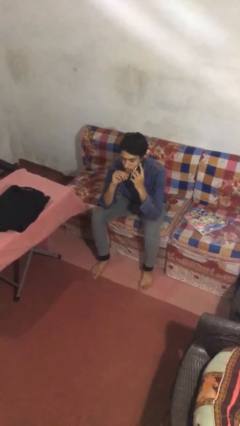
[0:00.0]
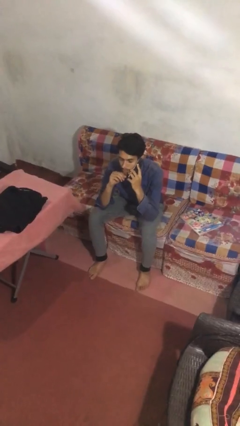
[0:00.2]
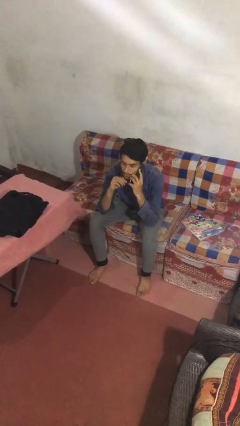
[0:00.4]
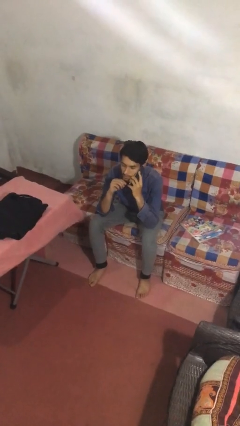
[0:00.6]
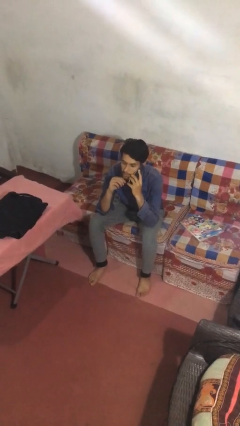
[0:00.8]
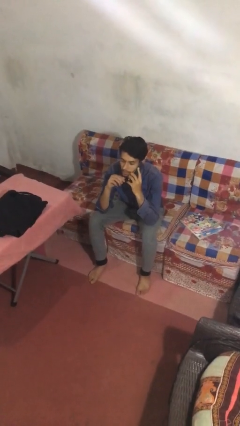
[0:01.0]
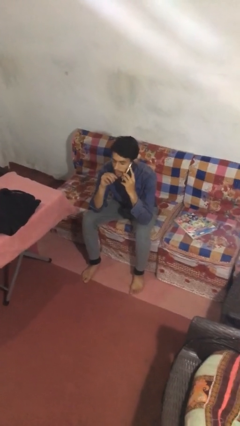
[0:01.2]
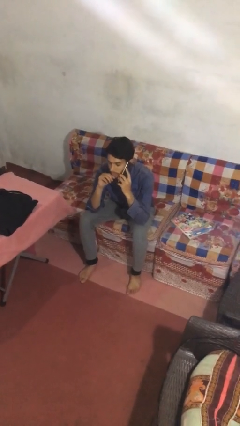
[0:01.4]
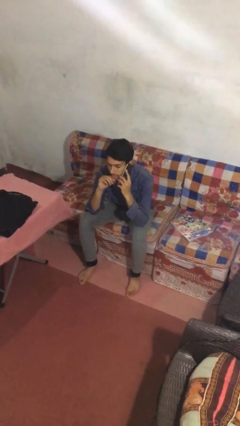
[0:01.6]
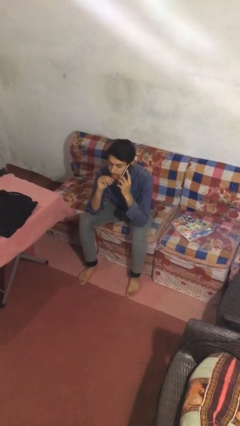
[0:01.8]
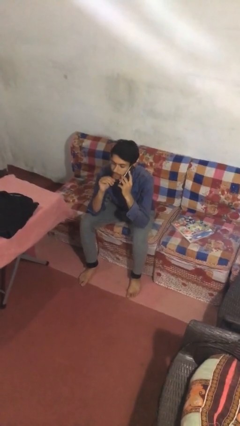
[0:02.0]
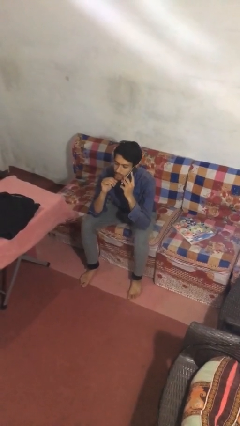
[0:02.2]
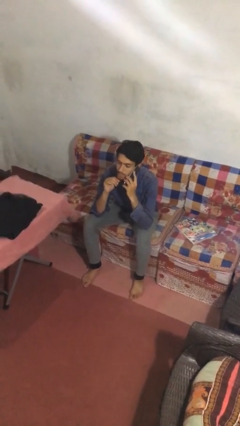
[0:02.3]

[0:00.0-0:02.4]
person talks on phone

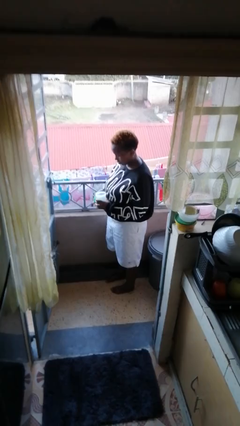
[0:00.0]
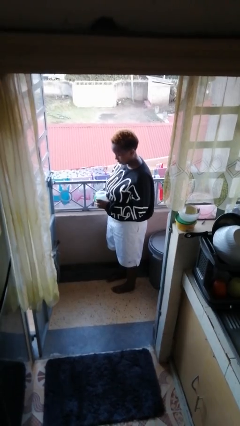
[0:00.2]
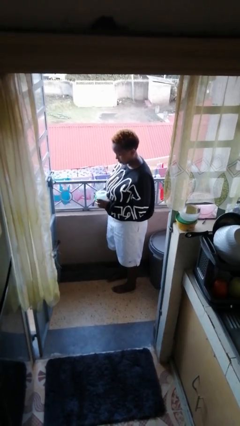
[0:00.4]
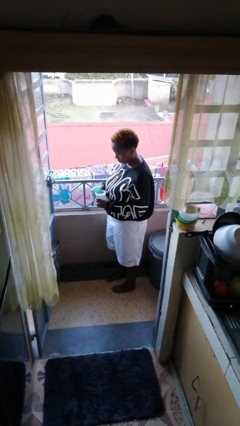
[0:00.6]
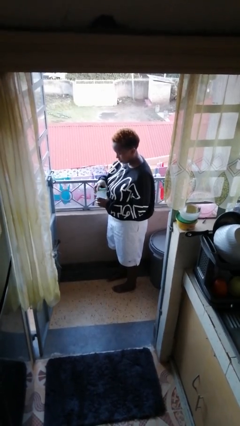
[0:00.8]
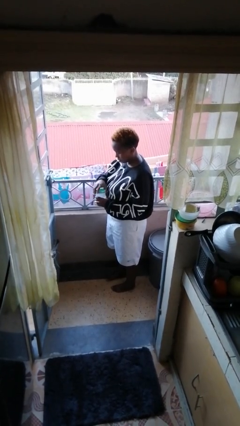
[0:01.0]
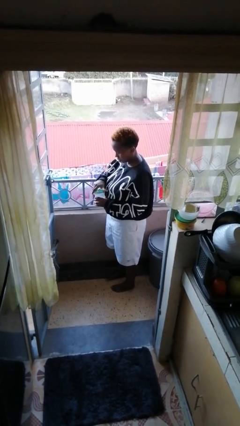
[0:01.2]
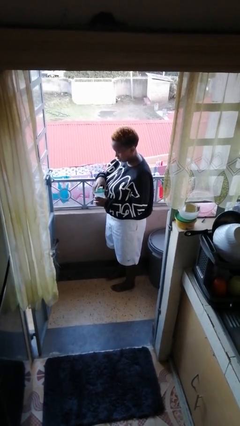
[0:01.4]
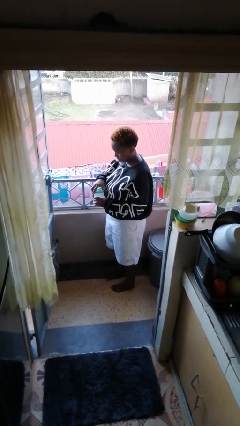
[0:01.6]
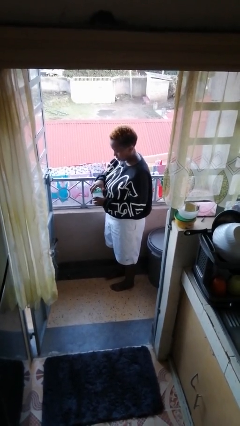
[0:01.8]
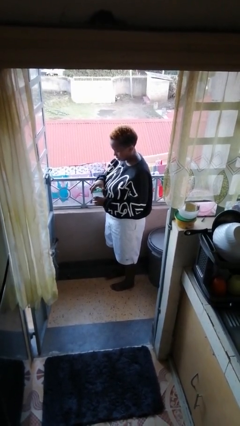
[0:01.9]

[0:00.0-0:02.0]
person closes jar

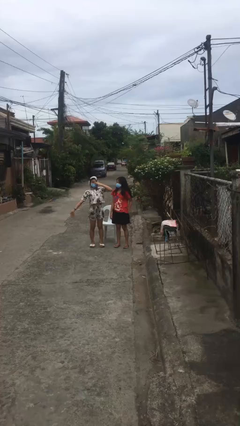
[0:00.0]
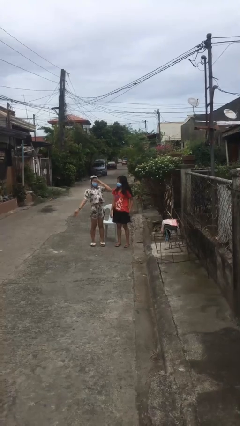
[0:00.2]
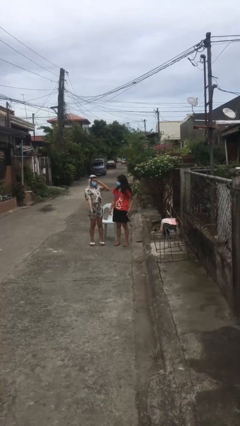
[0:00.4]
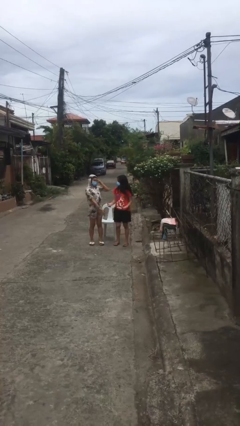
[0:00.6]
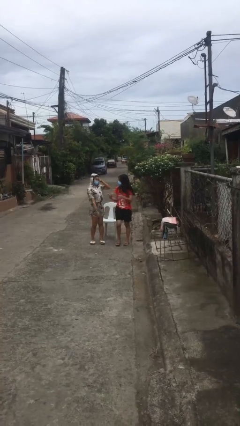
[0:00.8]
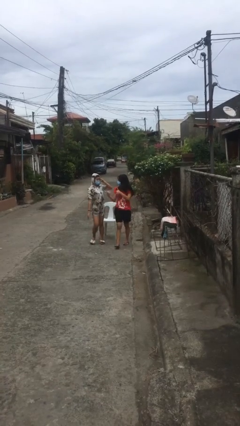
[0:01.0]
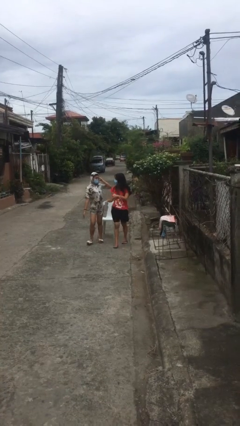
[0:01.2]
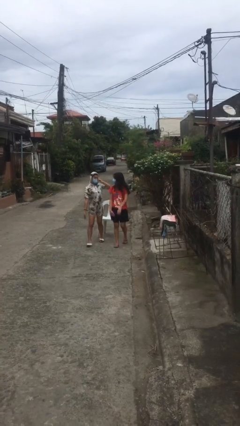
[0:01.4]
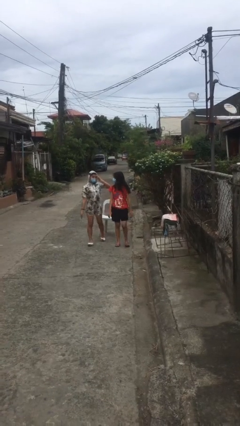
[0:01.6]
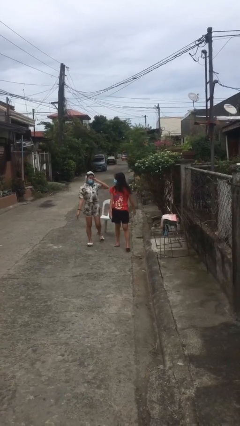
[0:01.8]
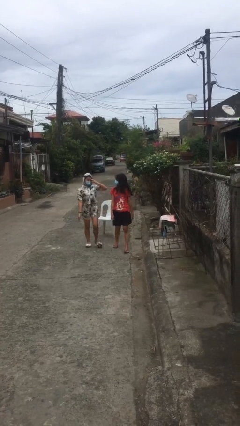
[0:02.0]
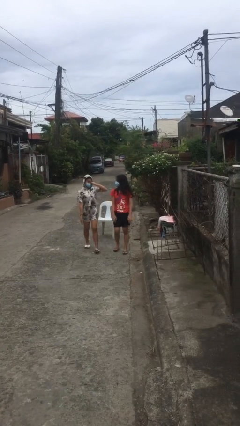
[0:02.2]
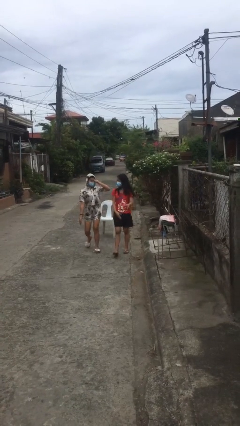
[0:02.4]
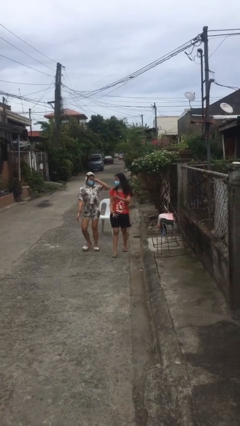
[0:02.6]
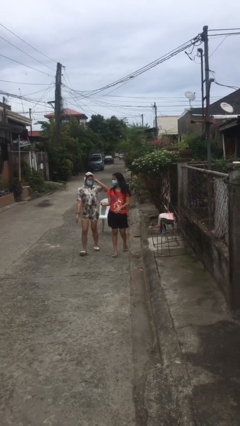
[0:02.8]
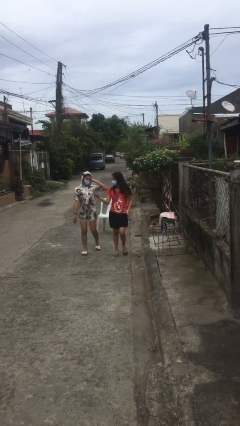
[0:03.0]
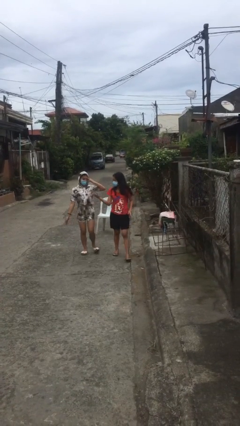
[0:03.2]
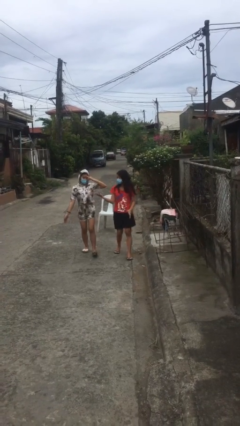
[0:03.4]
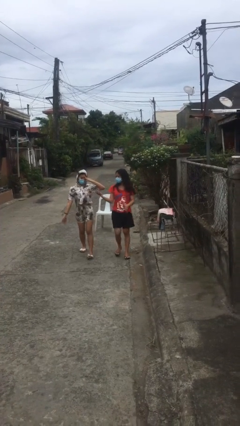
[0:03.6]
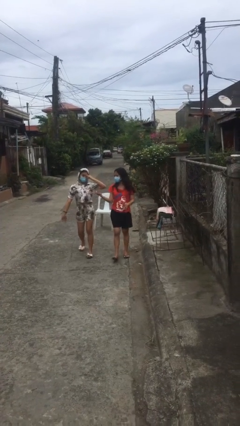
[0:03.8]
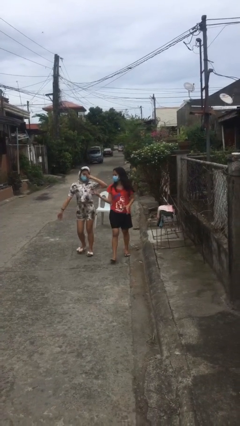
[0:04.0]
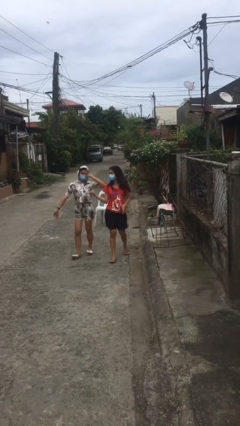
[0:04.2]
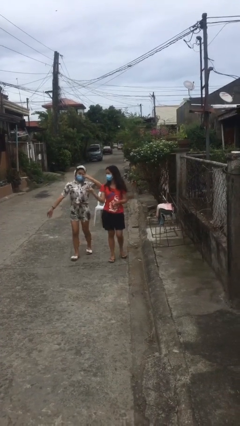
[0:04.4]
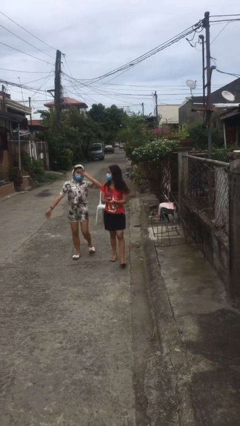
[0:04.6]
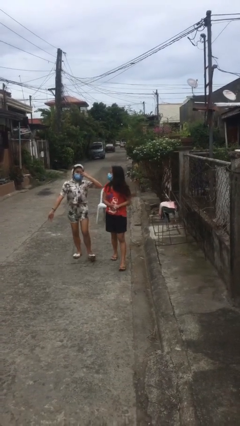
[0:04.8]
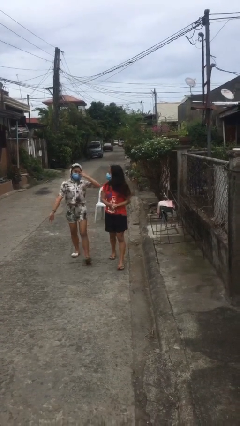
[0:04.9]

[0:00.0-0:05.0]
person talks to person

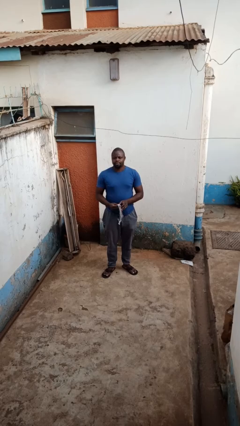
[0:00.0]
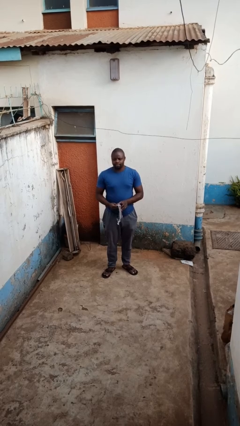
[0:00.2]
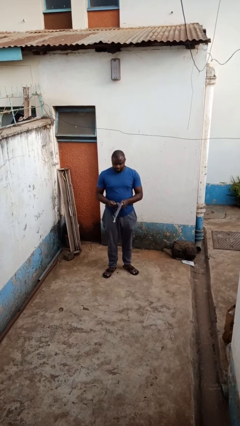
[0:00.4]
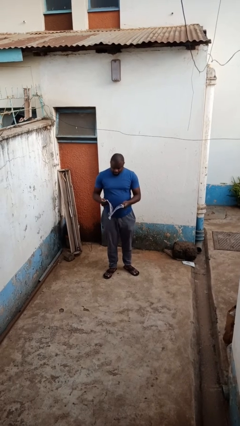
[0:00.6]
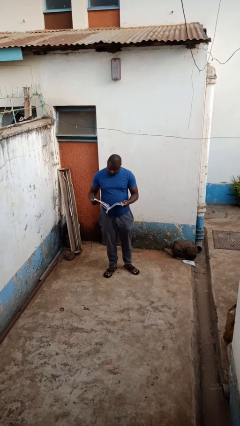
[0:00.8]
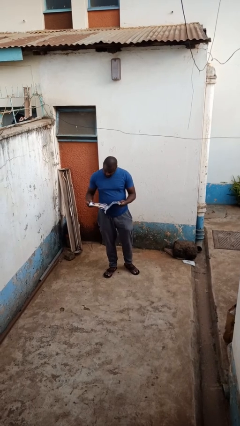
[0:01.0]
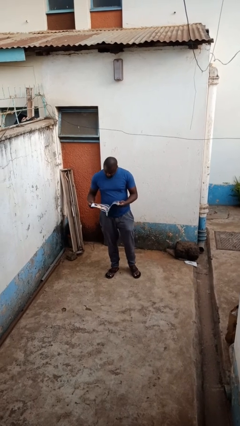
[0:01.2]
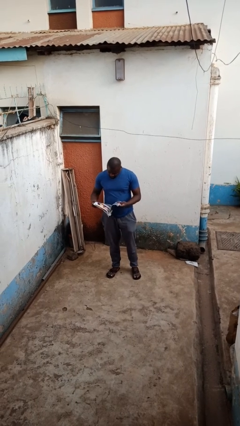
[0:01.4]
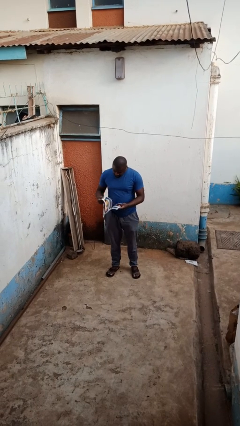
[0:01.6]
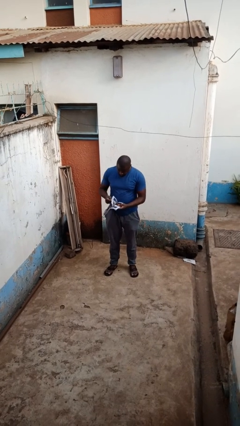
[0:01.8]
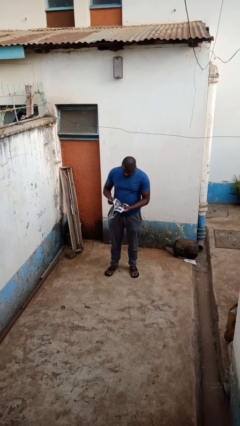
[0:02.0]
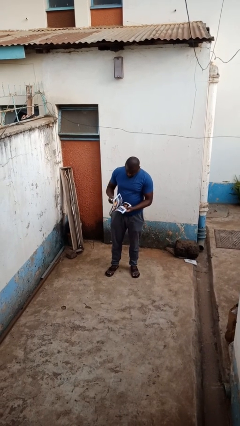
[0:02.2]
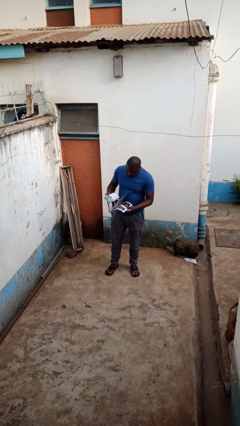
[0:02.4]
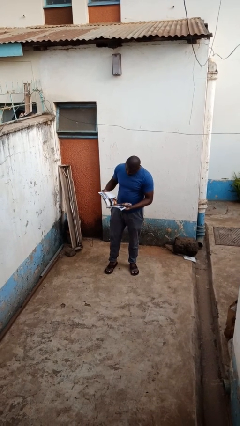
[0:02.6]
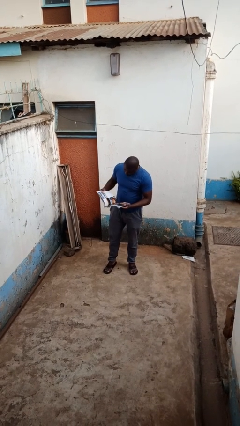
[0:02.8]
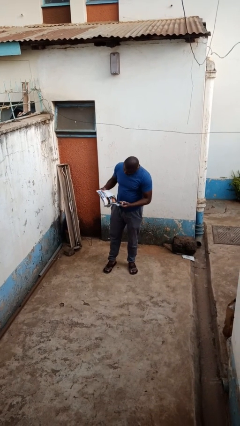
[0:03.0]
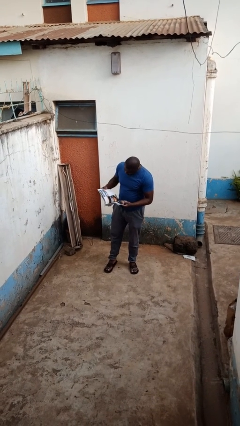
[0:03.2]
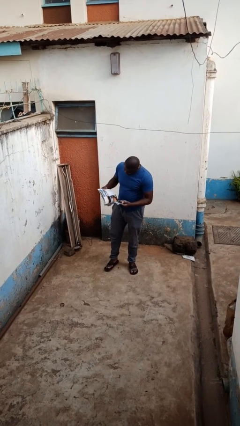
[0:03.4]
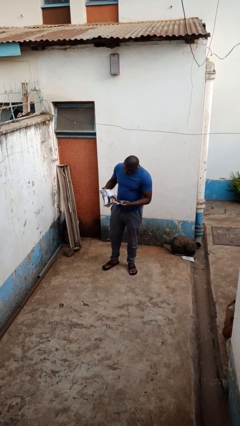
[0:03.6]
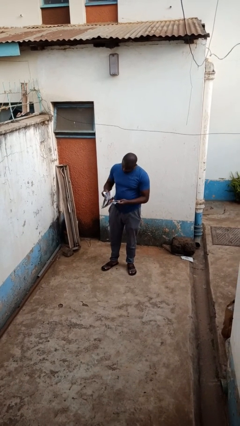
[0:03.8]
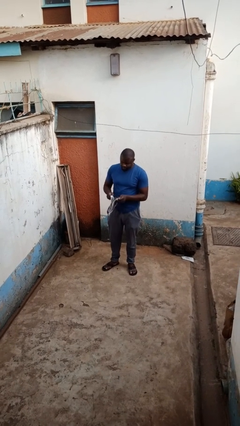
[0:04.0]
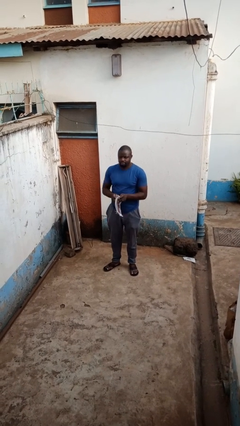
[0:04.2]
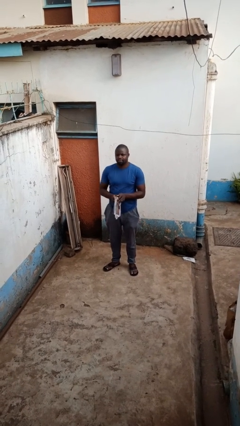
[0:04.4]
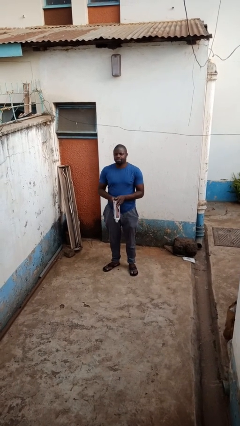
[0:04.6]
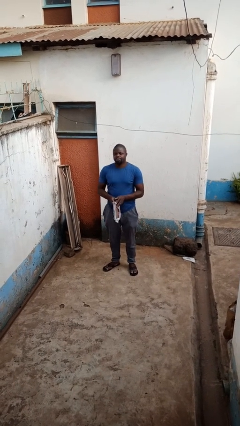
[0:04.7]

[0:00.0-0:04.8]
person reads magazine

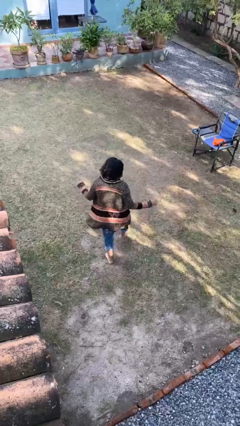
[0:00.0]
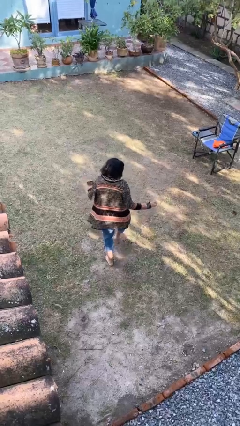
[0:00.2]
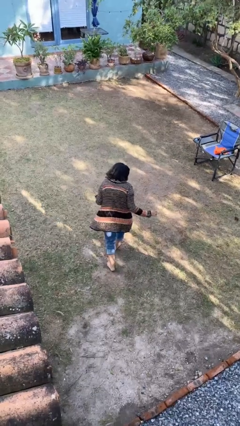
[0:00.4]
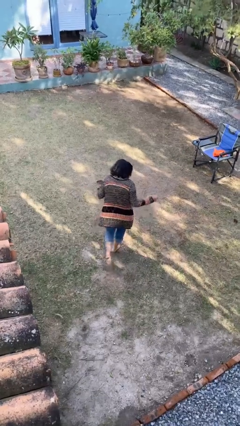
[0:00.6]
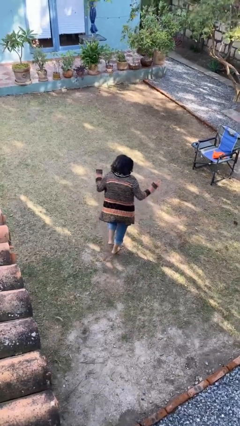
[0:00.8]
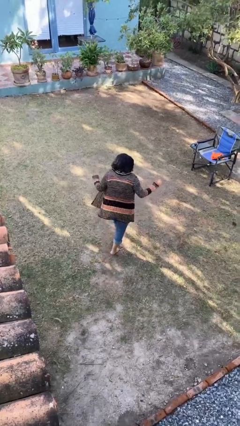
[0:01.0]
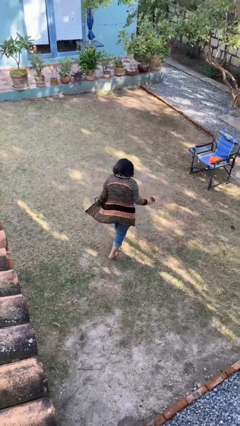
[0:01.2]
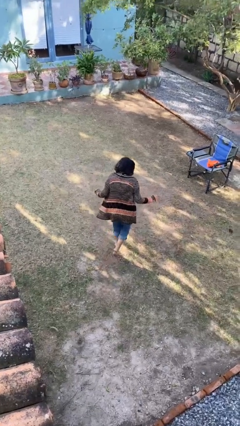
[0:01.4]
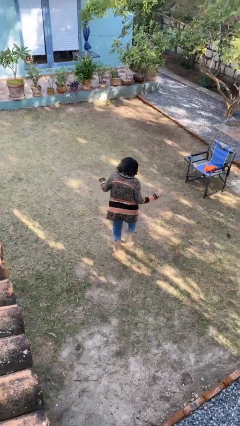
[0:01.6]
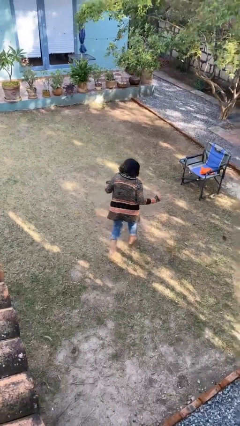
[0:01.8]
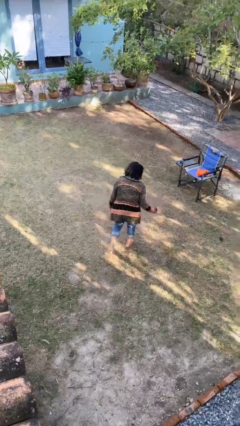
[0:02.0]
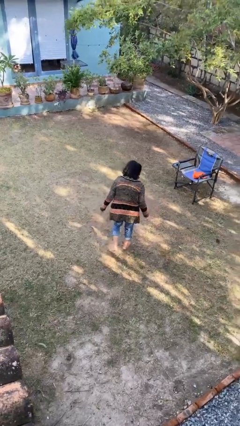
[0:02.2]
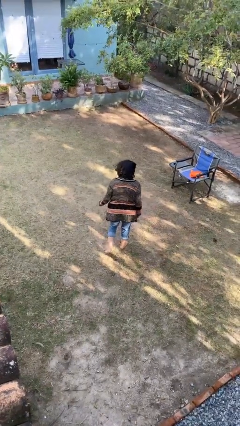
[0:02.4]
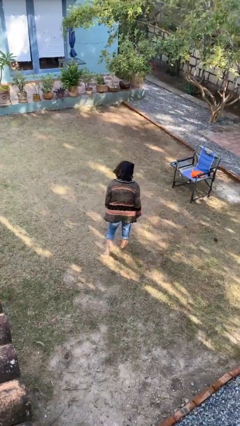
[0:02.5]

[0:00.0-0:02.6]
person walks tiptoe

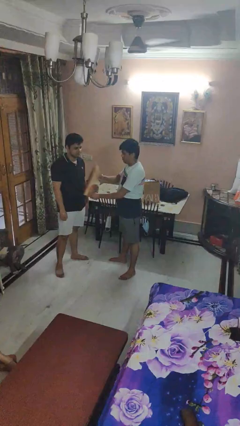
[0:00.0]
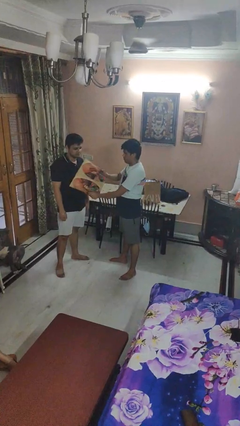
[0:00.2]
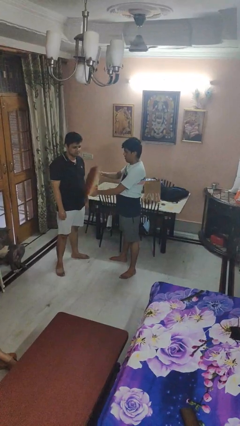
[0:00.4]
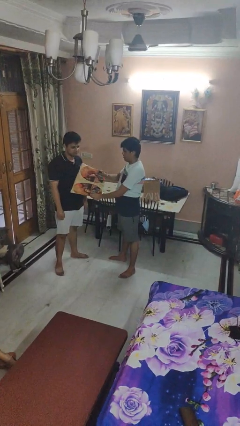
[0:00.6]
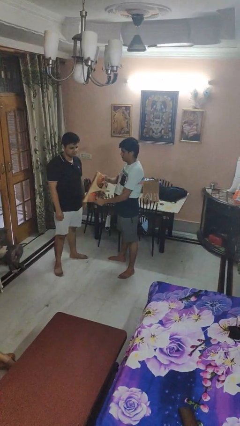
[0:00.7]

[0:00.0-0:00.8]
person hits person with pillow
